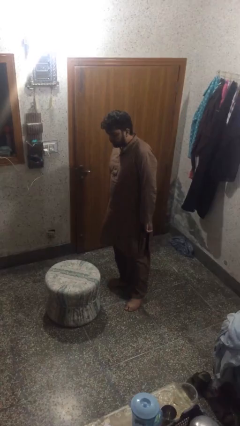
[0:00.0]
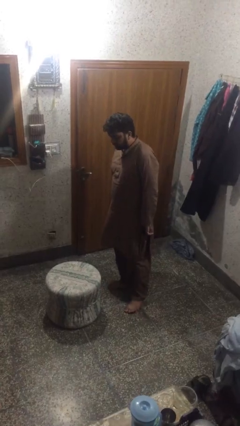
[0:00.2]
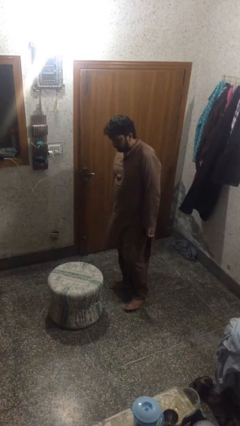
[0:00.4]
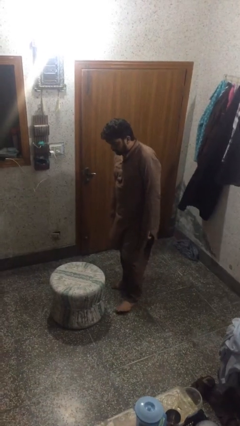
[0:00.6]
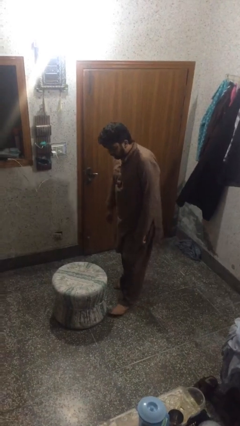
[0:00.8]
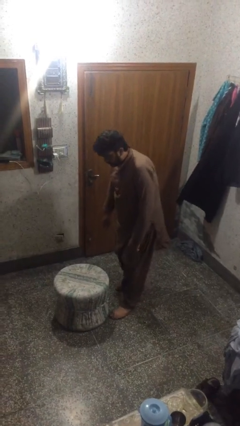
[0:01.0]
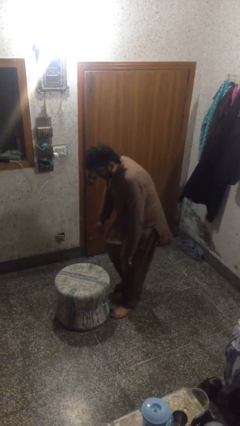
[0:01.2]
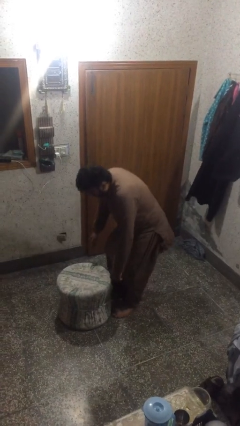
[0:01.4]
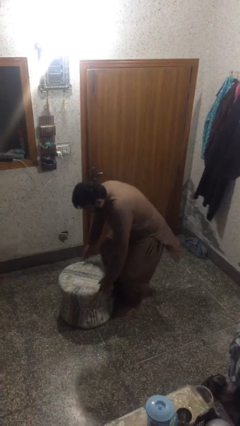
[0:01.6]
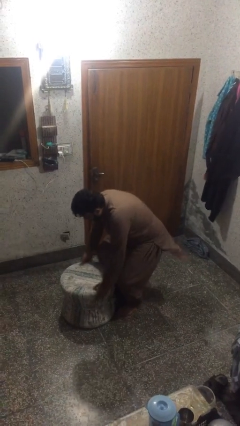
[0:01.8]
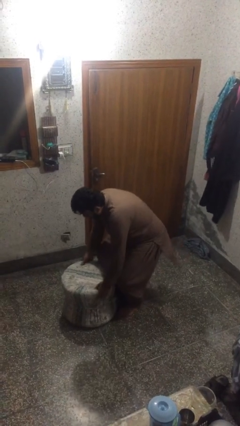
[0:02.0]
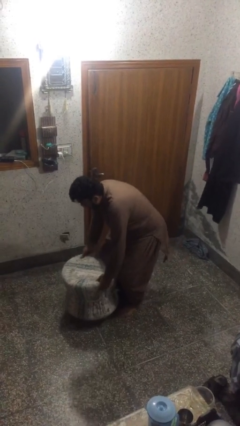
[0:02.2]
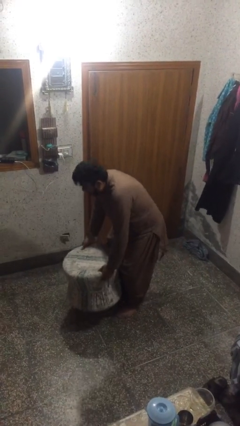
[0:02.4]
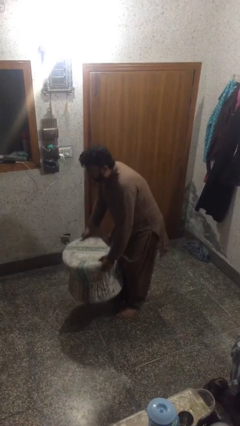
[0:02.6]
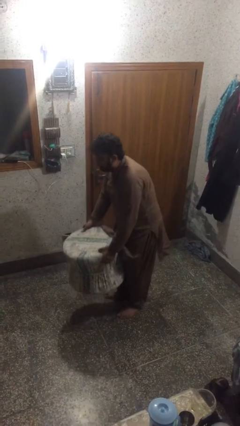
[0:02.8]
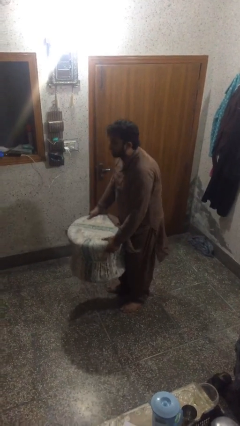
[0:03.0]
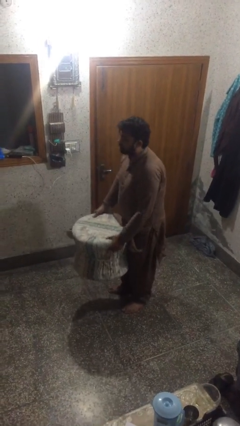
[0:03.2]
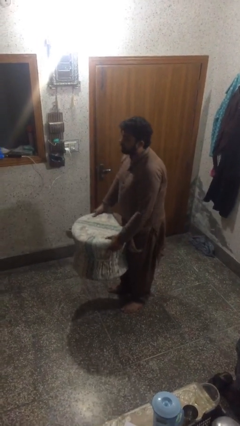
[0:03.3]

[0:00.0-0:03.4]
person picks up object from floor

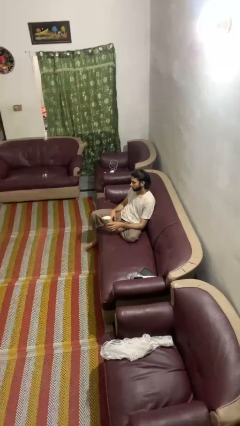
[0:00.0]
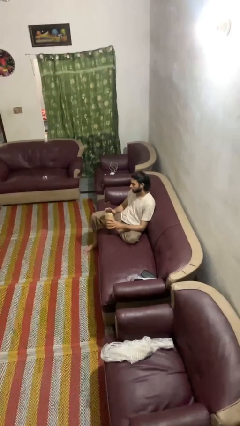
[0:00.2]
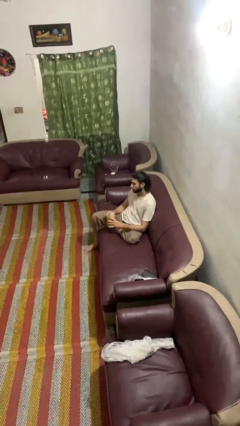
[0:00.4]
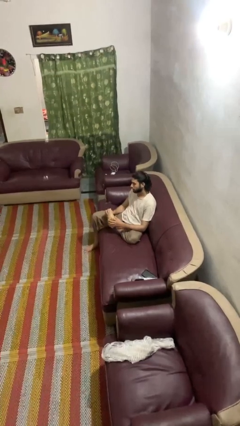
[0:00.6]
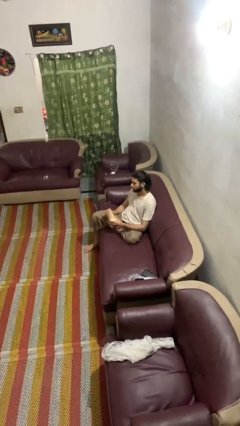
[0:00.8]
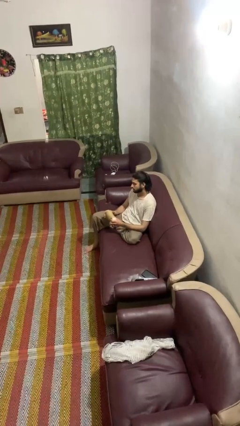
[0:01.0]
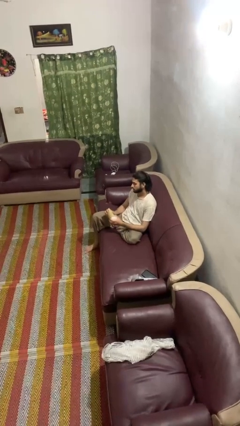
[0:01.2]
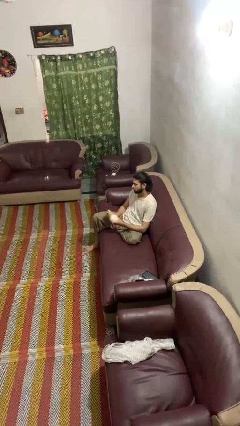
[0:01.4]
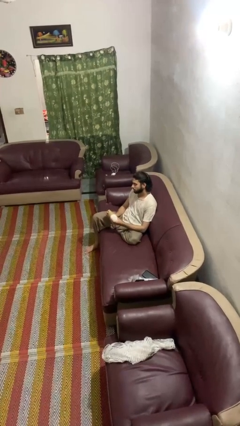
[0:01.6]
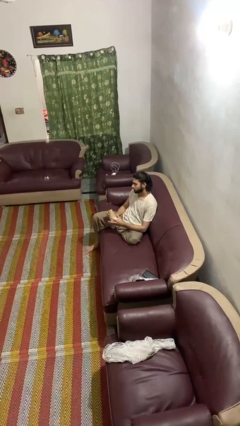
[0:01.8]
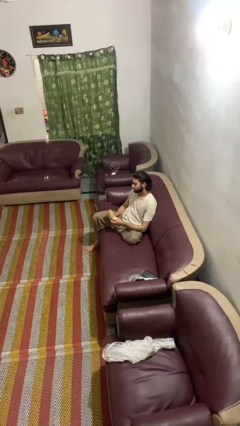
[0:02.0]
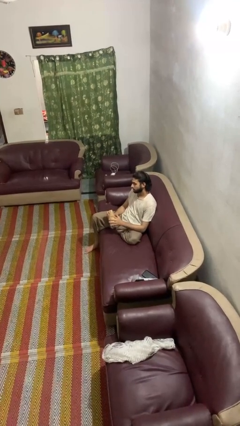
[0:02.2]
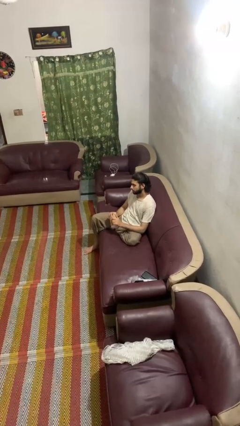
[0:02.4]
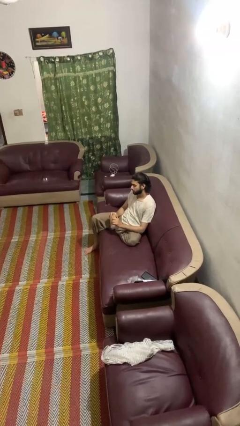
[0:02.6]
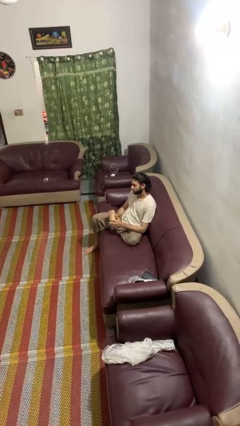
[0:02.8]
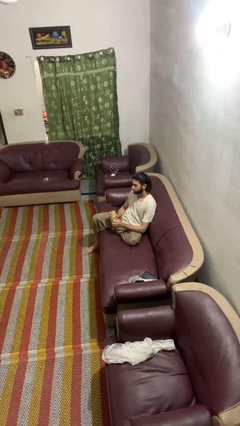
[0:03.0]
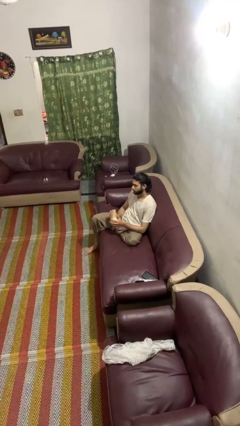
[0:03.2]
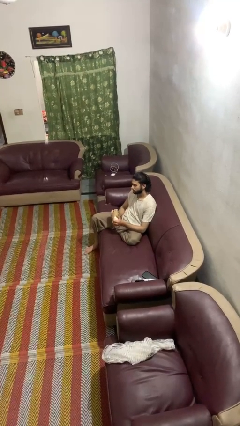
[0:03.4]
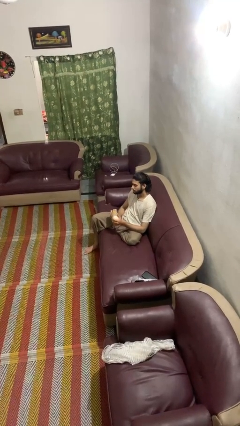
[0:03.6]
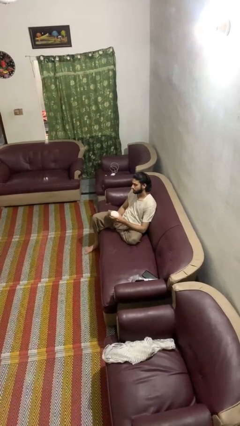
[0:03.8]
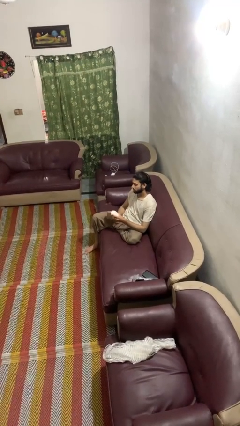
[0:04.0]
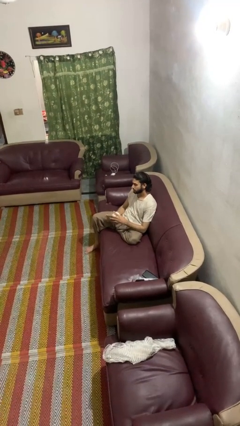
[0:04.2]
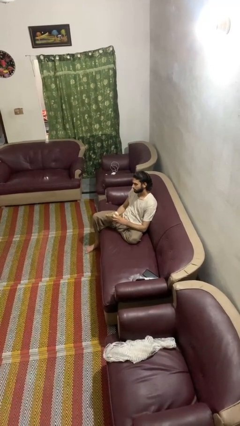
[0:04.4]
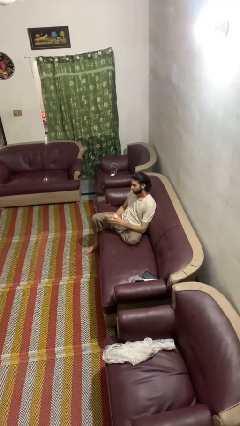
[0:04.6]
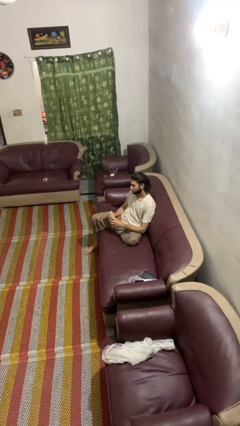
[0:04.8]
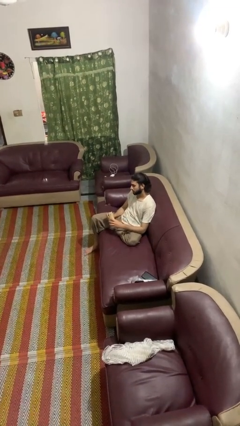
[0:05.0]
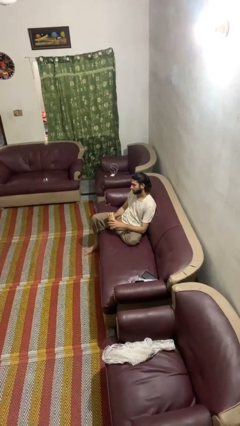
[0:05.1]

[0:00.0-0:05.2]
person squeezes object

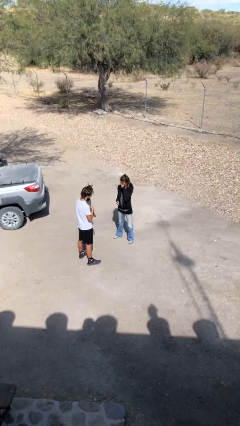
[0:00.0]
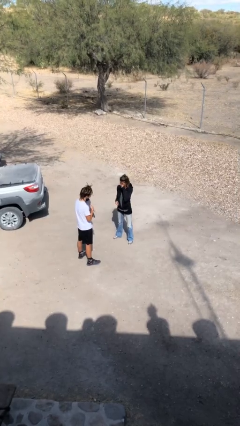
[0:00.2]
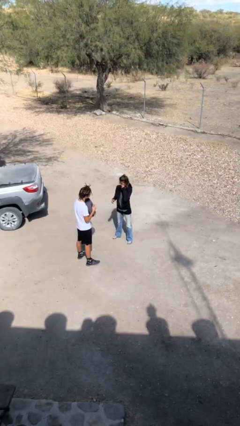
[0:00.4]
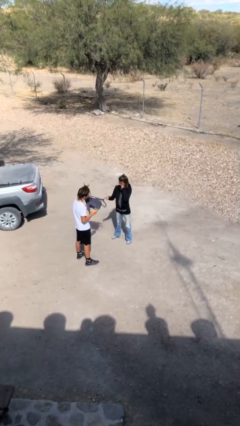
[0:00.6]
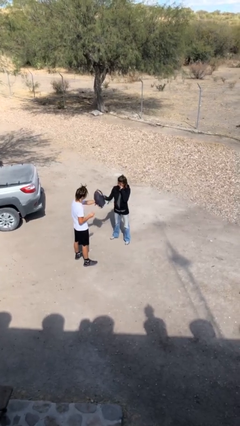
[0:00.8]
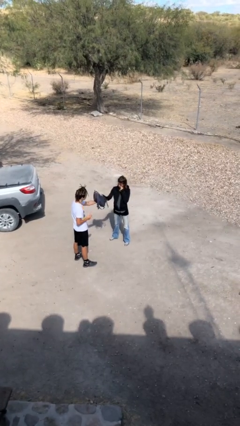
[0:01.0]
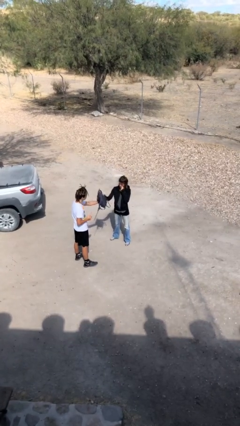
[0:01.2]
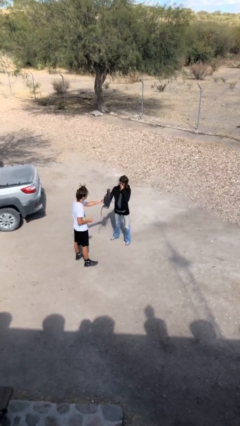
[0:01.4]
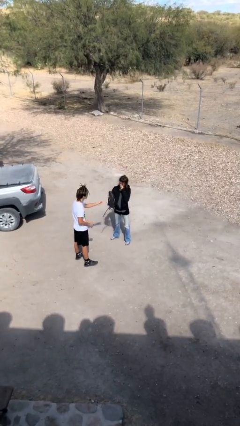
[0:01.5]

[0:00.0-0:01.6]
person transfers object to person

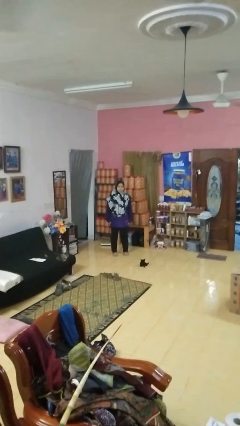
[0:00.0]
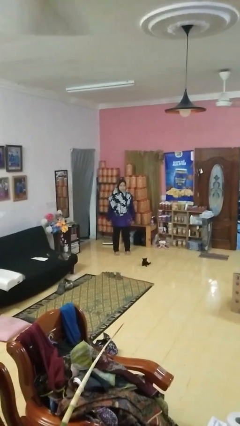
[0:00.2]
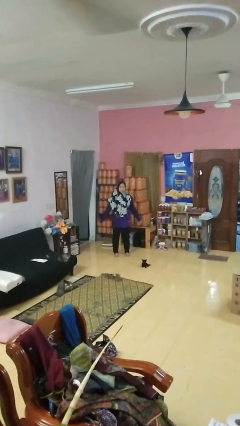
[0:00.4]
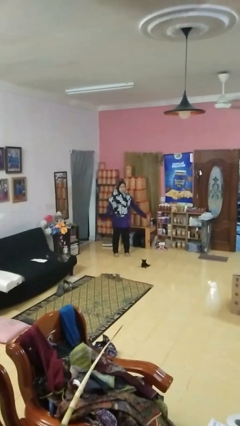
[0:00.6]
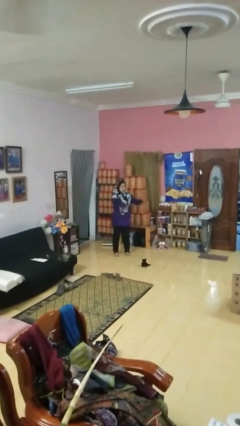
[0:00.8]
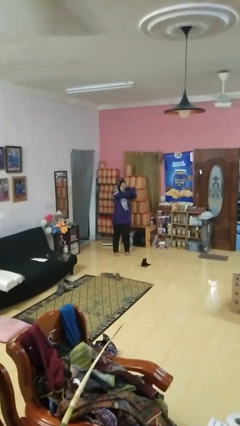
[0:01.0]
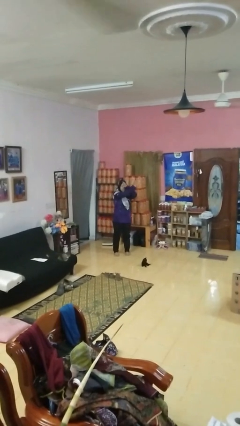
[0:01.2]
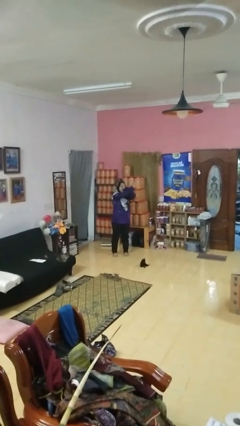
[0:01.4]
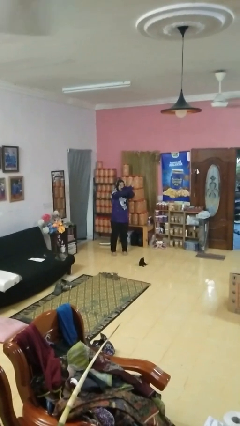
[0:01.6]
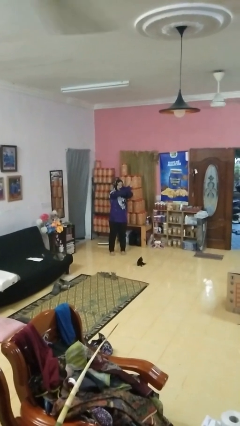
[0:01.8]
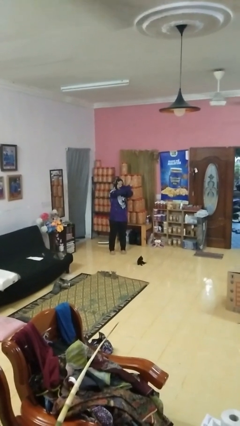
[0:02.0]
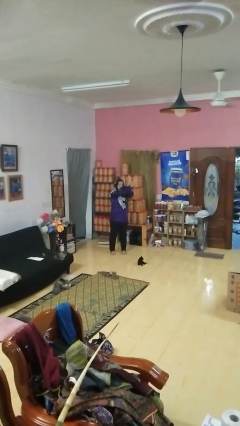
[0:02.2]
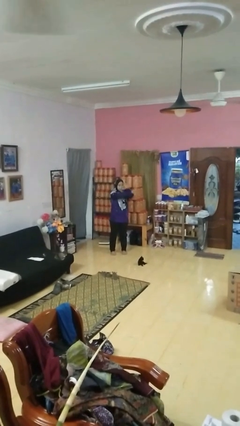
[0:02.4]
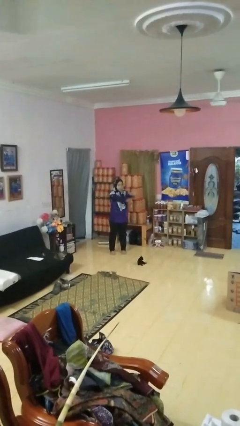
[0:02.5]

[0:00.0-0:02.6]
person gestures arms x

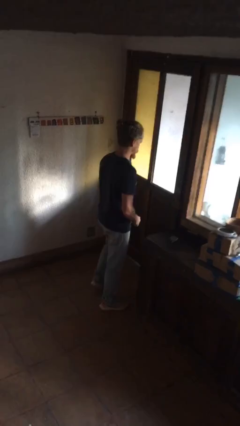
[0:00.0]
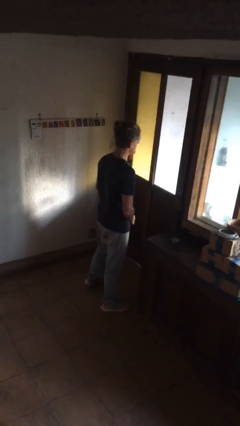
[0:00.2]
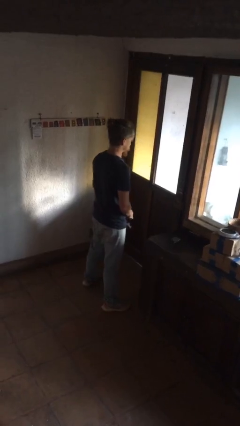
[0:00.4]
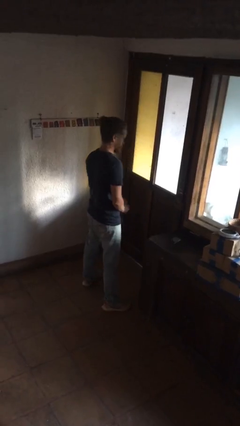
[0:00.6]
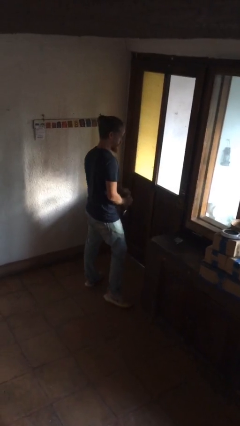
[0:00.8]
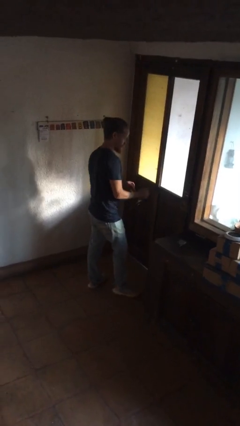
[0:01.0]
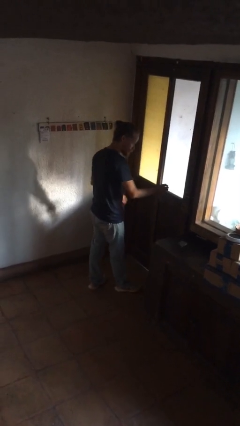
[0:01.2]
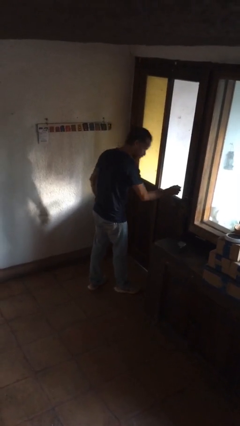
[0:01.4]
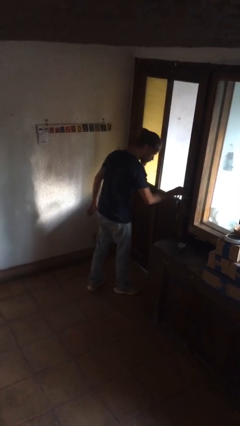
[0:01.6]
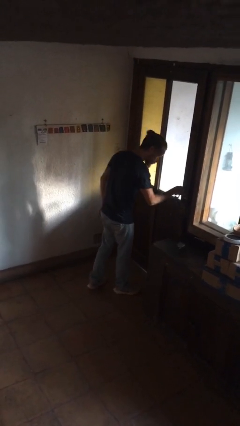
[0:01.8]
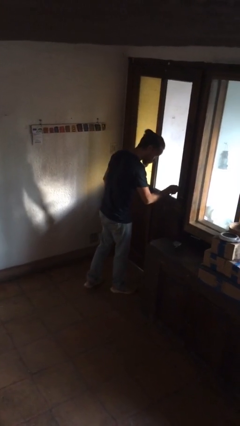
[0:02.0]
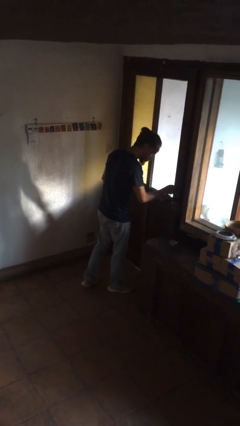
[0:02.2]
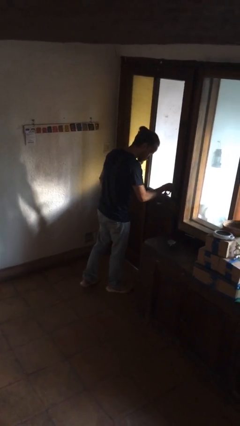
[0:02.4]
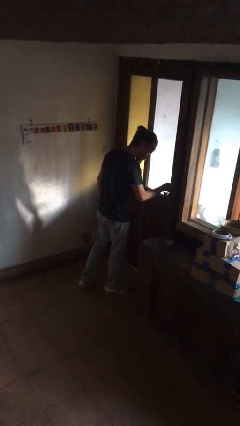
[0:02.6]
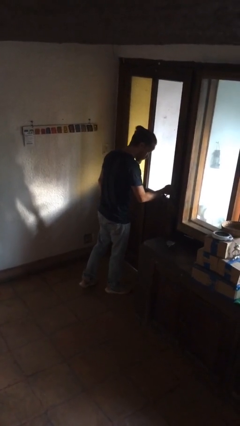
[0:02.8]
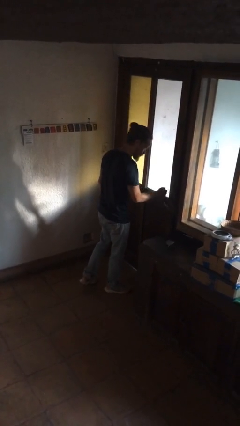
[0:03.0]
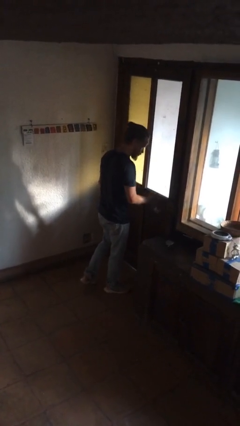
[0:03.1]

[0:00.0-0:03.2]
person unlocks door with keys

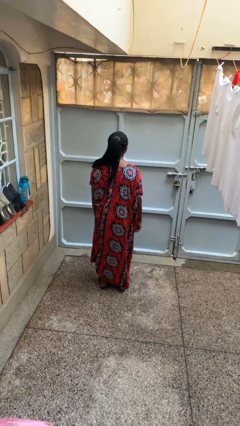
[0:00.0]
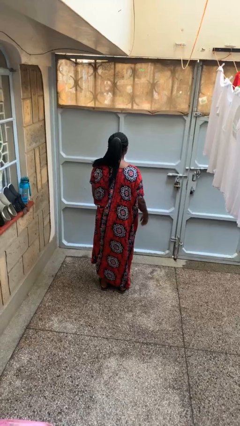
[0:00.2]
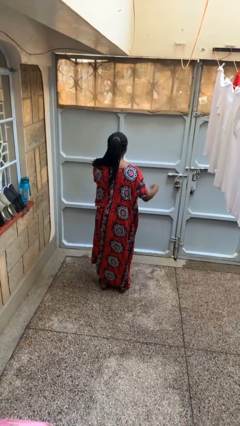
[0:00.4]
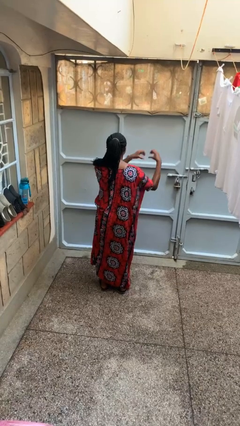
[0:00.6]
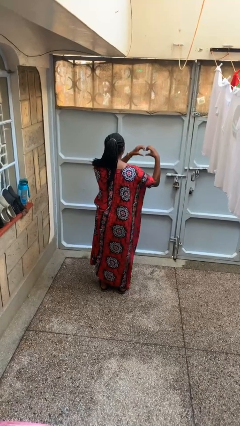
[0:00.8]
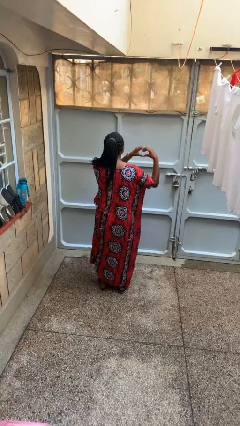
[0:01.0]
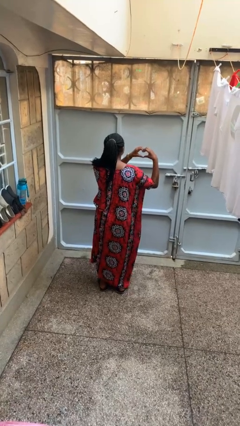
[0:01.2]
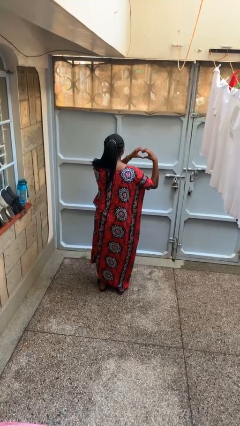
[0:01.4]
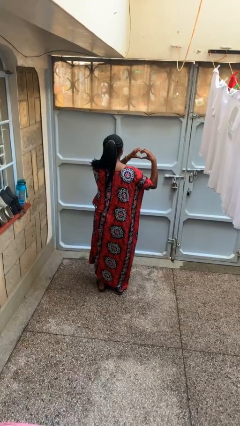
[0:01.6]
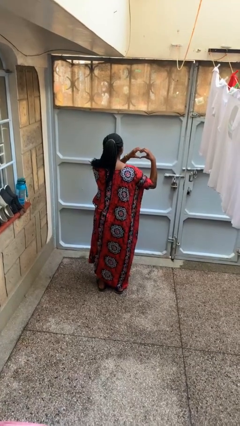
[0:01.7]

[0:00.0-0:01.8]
person gestures heart
